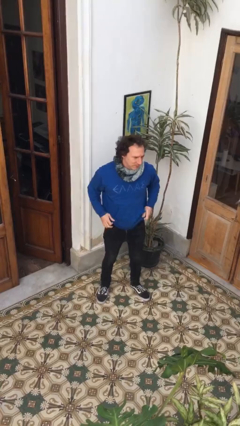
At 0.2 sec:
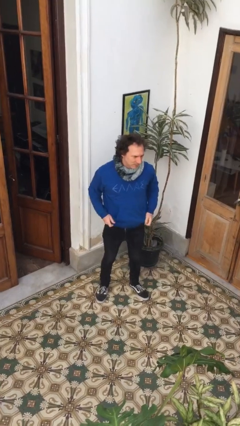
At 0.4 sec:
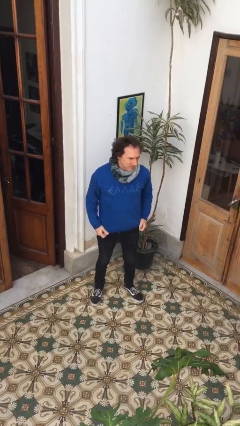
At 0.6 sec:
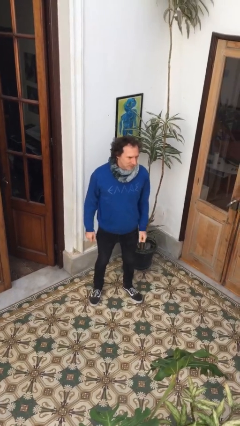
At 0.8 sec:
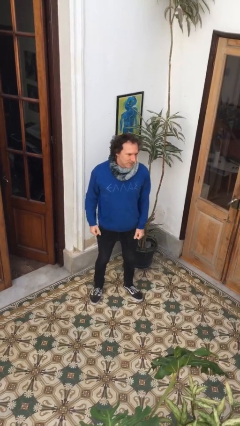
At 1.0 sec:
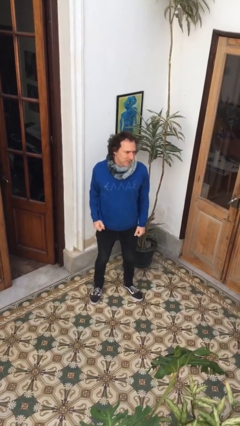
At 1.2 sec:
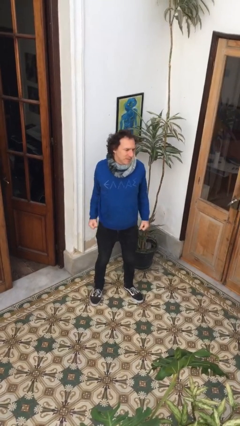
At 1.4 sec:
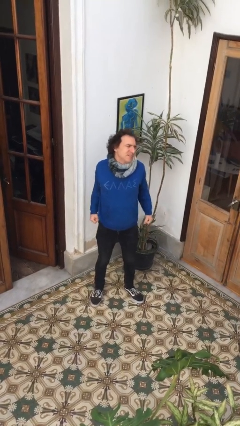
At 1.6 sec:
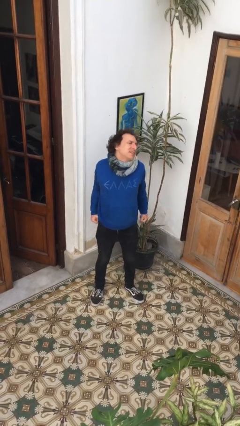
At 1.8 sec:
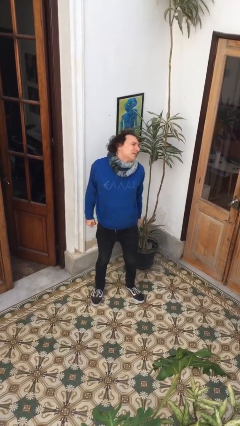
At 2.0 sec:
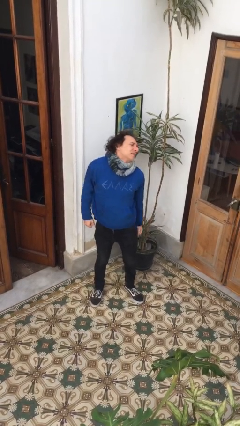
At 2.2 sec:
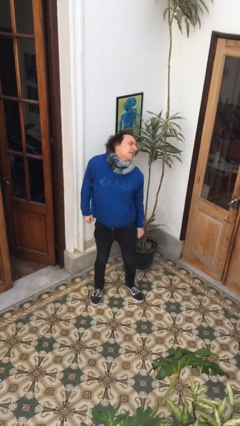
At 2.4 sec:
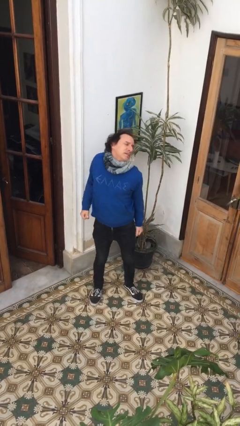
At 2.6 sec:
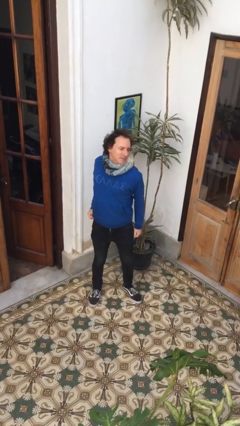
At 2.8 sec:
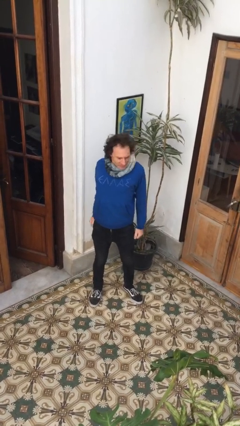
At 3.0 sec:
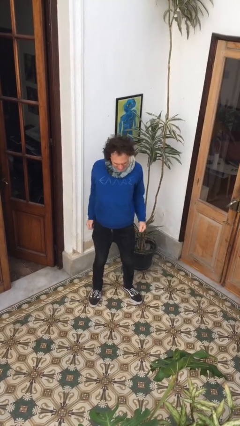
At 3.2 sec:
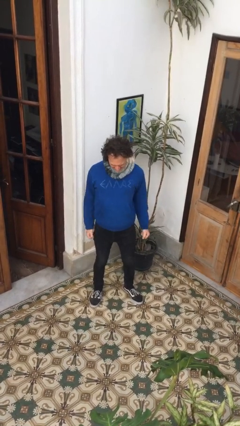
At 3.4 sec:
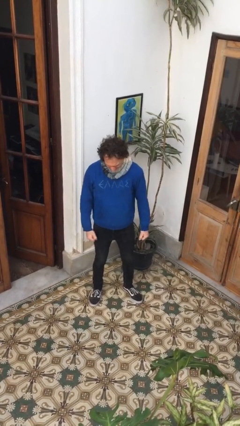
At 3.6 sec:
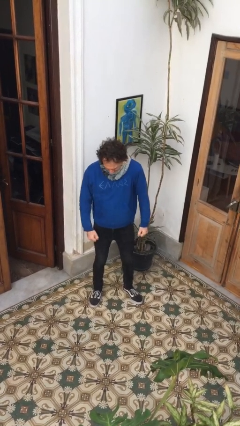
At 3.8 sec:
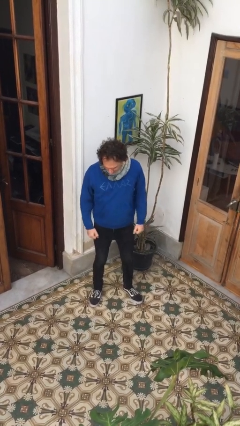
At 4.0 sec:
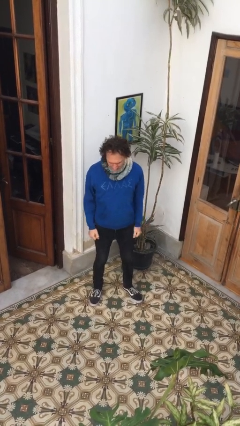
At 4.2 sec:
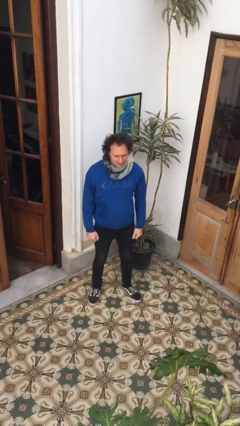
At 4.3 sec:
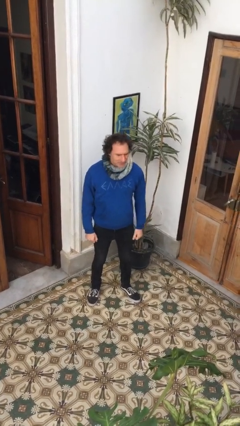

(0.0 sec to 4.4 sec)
person stretches back

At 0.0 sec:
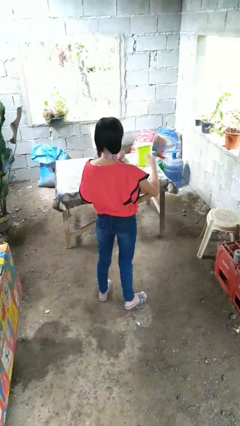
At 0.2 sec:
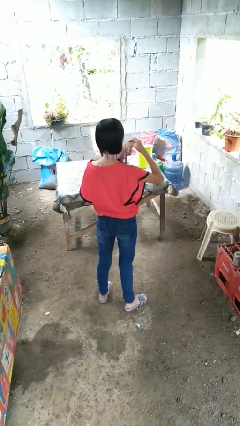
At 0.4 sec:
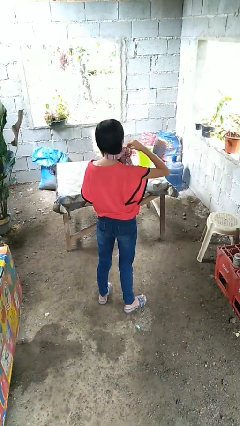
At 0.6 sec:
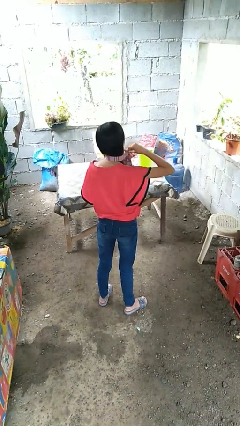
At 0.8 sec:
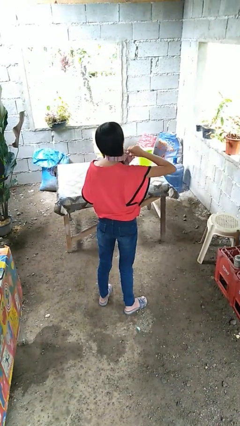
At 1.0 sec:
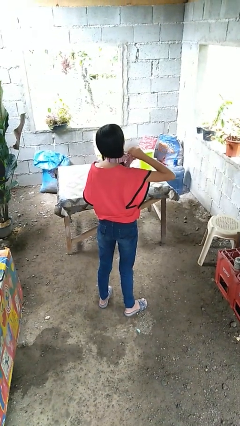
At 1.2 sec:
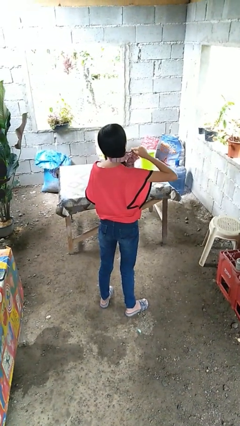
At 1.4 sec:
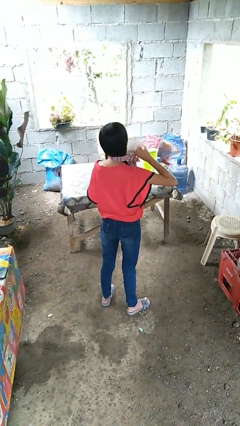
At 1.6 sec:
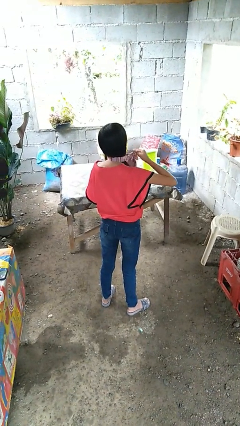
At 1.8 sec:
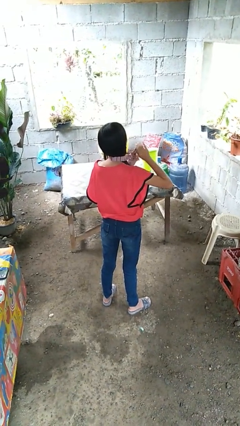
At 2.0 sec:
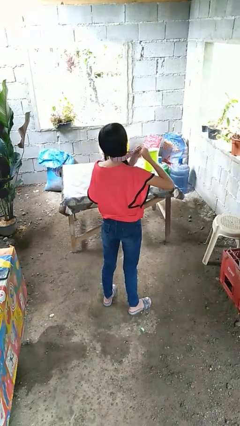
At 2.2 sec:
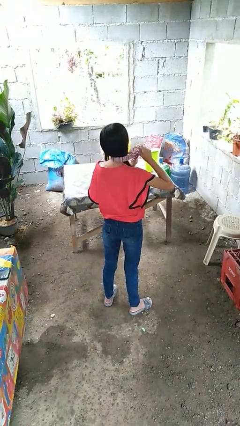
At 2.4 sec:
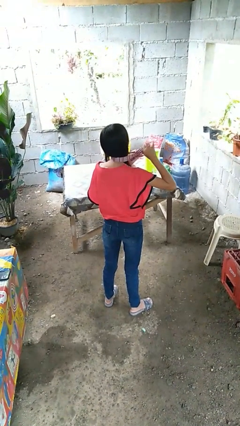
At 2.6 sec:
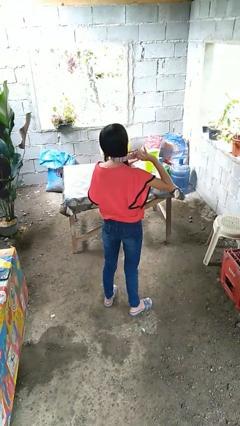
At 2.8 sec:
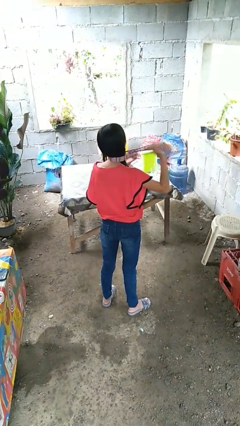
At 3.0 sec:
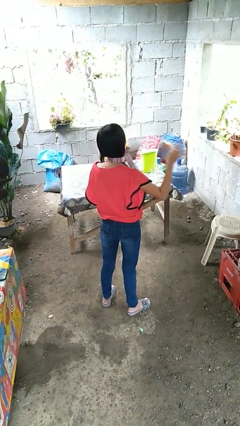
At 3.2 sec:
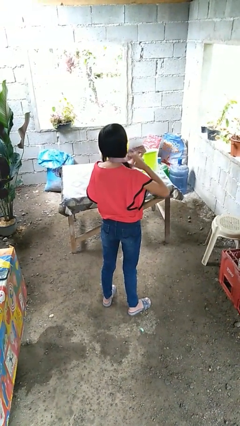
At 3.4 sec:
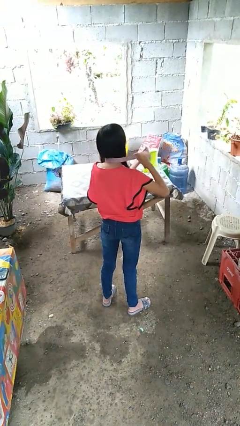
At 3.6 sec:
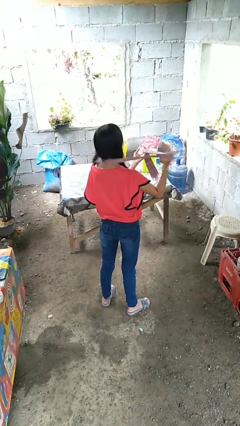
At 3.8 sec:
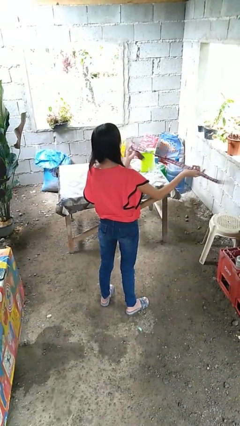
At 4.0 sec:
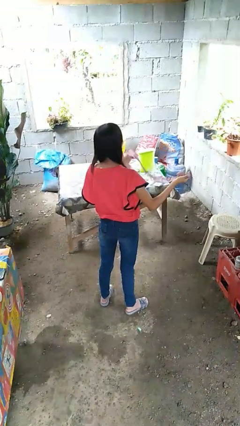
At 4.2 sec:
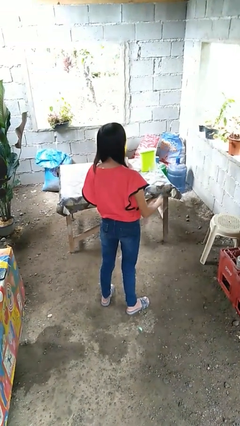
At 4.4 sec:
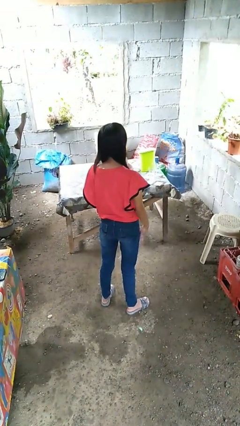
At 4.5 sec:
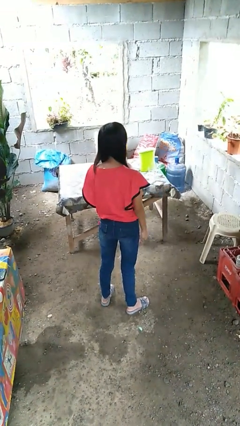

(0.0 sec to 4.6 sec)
person takes off necktie

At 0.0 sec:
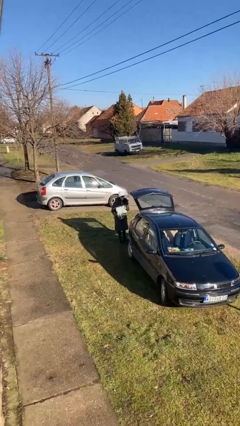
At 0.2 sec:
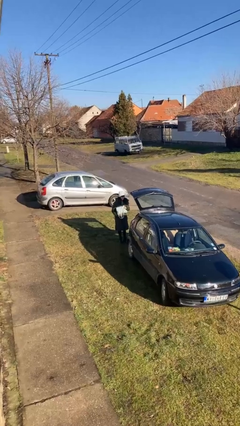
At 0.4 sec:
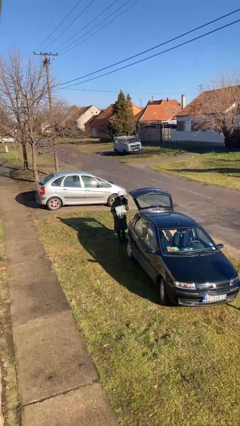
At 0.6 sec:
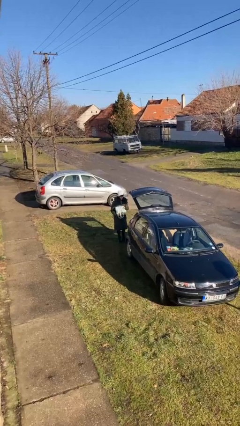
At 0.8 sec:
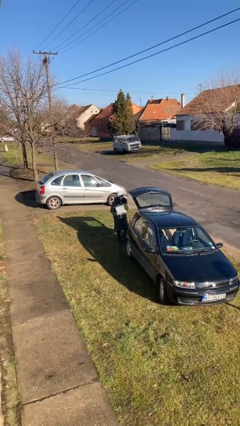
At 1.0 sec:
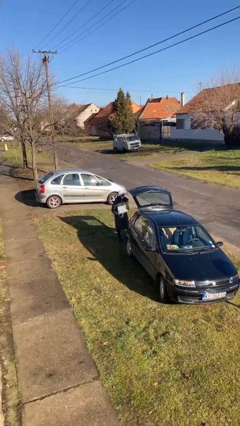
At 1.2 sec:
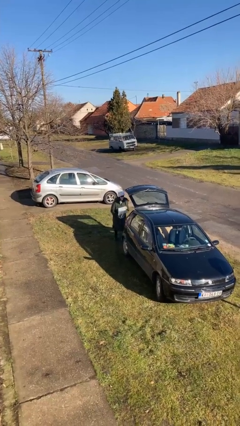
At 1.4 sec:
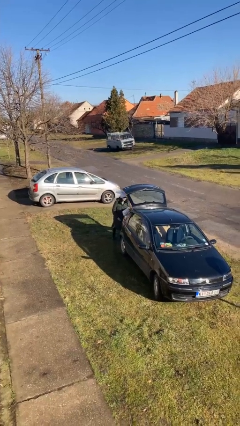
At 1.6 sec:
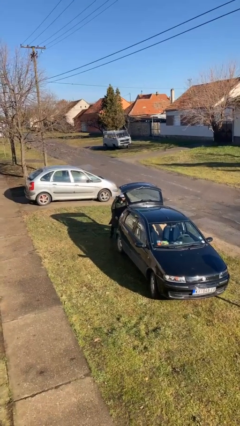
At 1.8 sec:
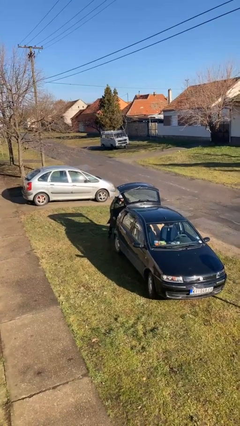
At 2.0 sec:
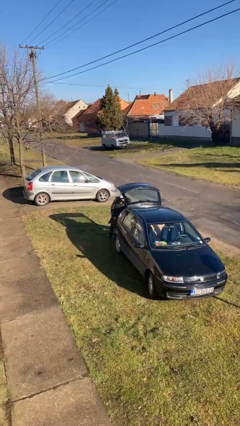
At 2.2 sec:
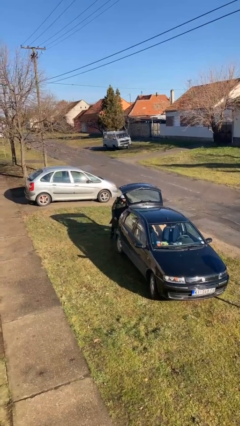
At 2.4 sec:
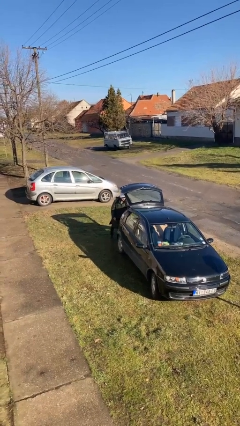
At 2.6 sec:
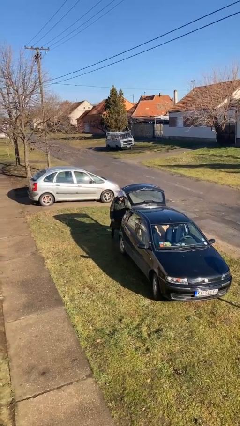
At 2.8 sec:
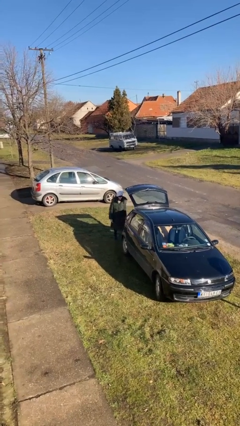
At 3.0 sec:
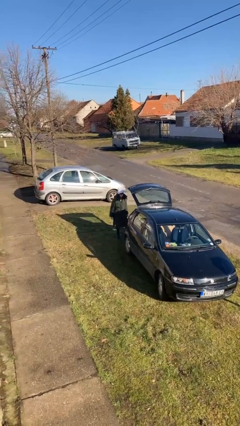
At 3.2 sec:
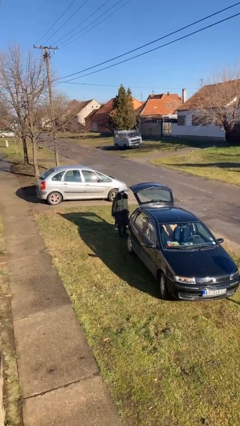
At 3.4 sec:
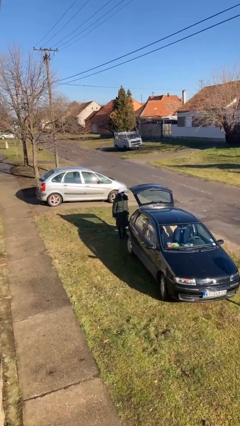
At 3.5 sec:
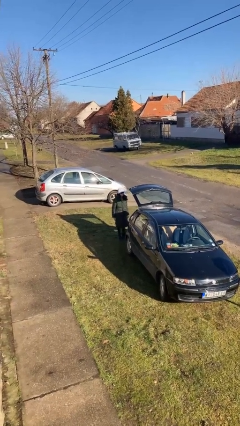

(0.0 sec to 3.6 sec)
person loads car

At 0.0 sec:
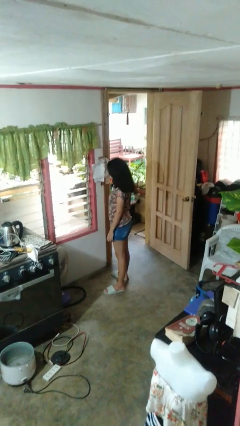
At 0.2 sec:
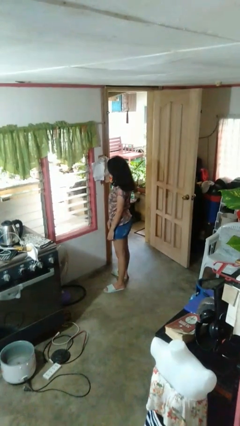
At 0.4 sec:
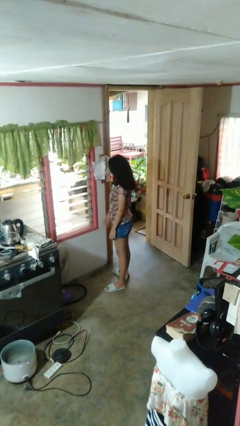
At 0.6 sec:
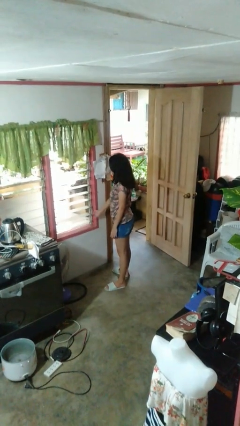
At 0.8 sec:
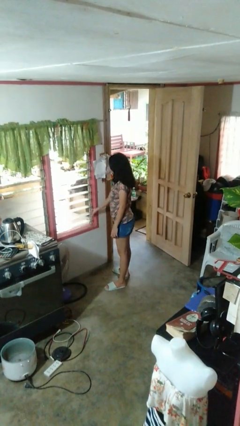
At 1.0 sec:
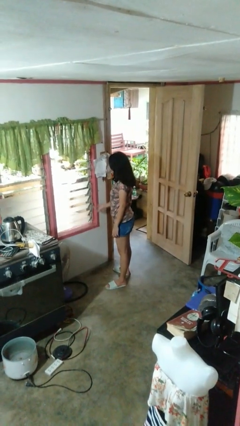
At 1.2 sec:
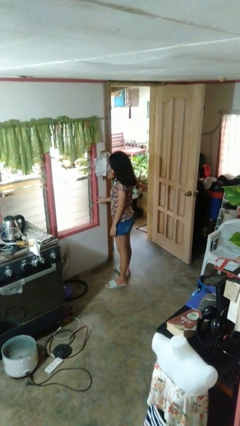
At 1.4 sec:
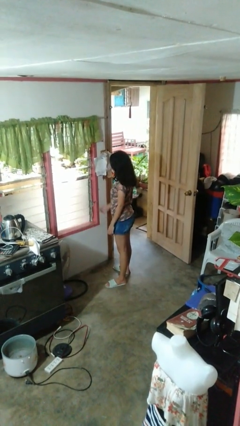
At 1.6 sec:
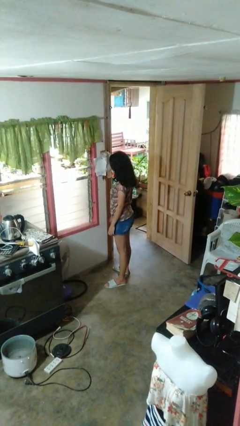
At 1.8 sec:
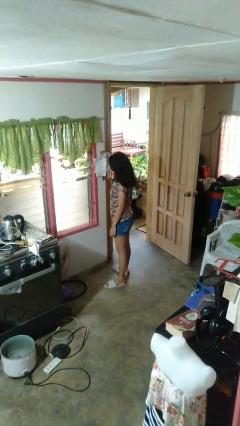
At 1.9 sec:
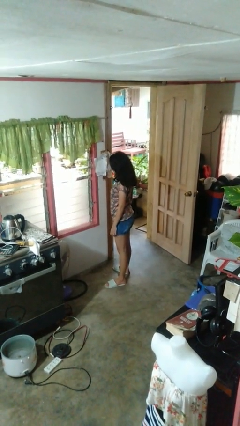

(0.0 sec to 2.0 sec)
person closes home window

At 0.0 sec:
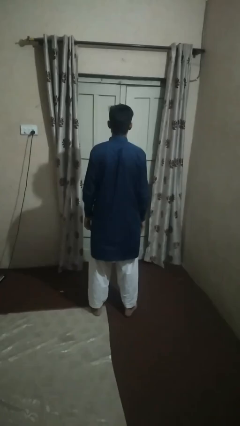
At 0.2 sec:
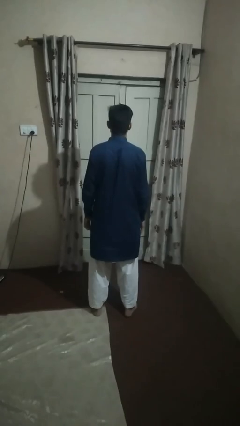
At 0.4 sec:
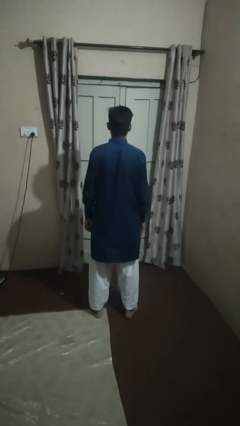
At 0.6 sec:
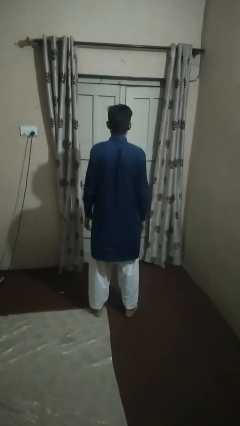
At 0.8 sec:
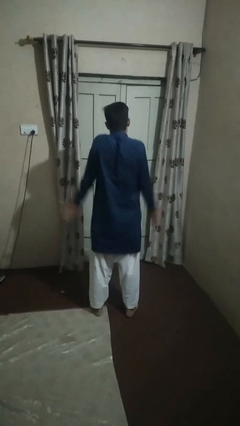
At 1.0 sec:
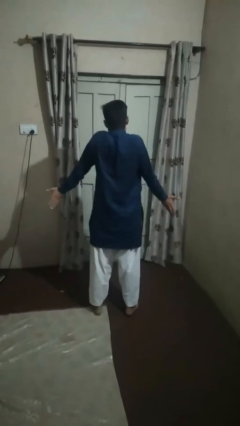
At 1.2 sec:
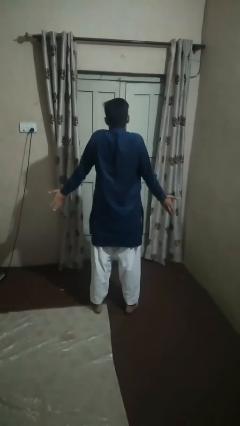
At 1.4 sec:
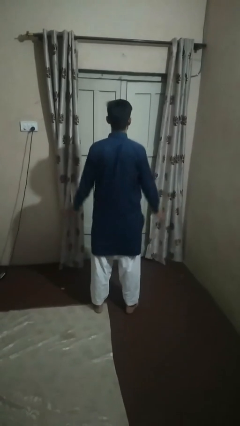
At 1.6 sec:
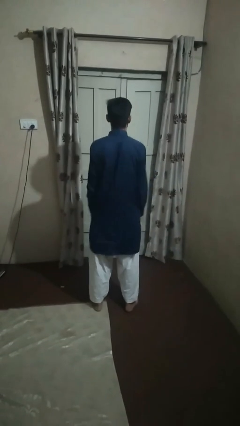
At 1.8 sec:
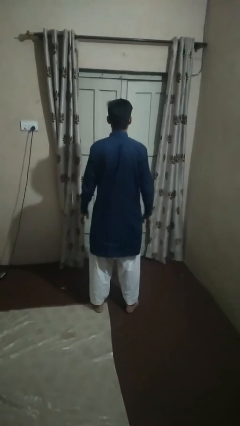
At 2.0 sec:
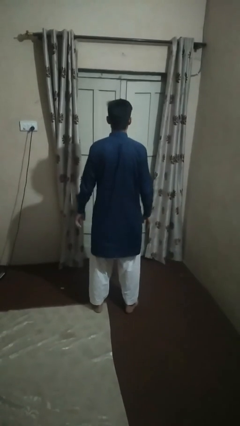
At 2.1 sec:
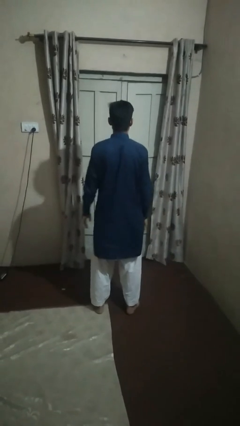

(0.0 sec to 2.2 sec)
person shrugs

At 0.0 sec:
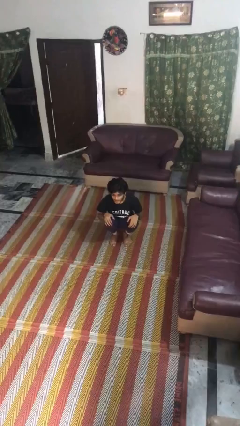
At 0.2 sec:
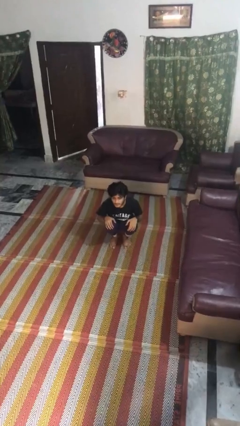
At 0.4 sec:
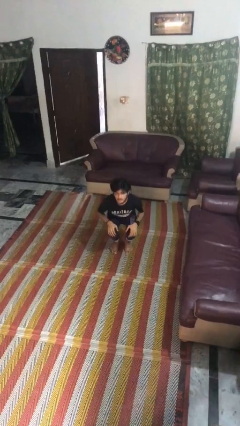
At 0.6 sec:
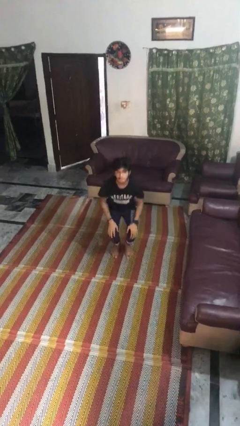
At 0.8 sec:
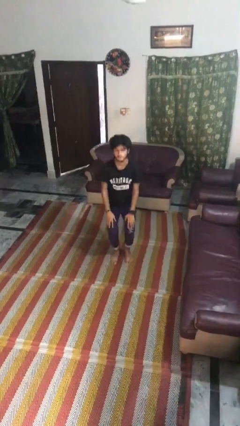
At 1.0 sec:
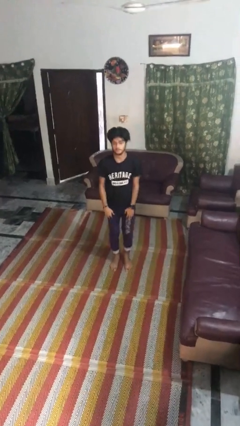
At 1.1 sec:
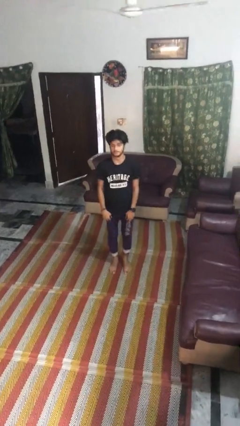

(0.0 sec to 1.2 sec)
person stands up
